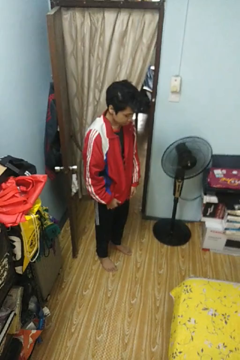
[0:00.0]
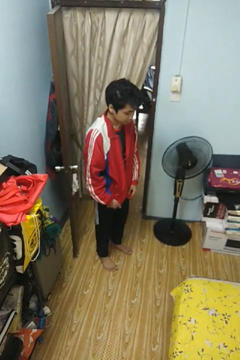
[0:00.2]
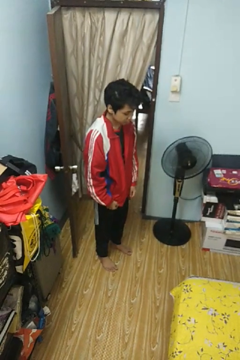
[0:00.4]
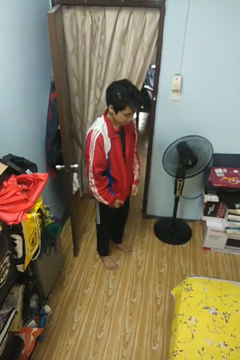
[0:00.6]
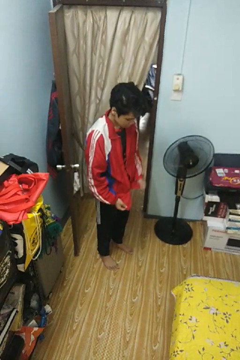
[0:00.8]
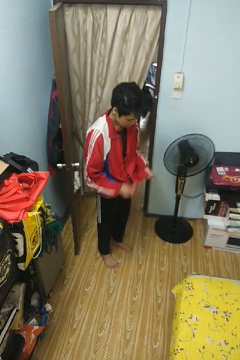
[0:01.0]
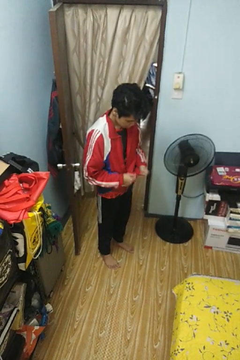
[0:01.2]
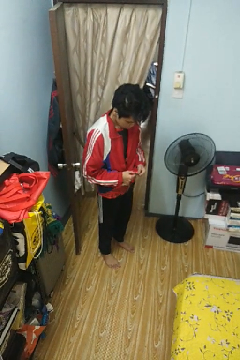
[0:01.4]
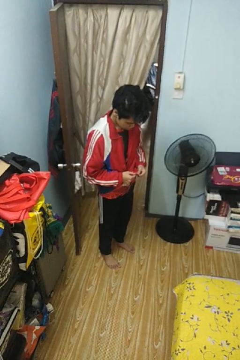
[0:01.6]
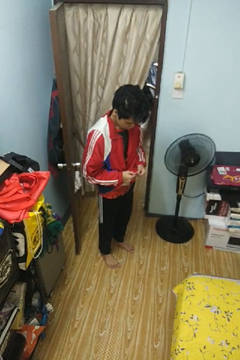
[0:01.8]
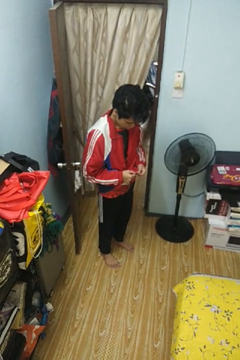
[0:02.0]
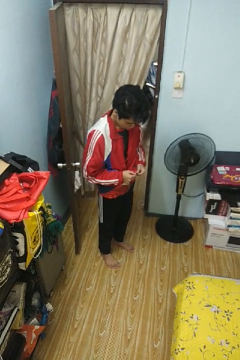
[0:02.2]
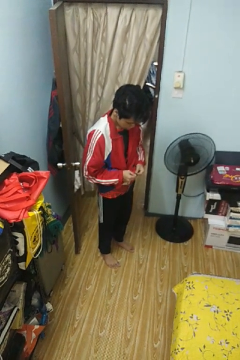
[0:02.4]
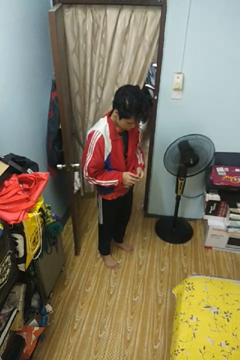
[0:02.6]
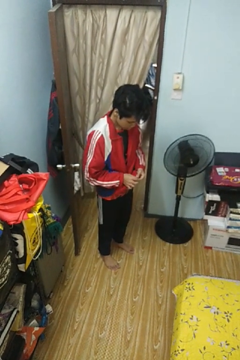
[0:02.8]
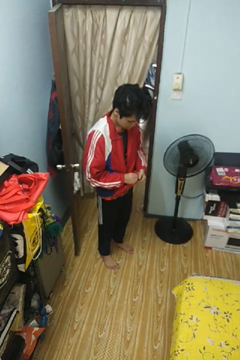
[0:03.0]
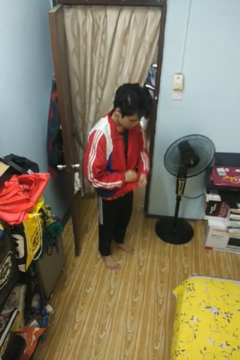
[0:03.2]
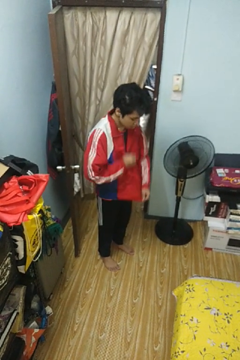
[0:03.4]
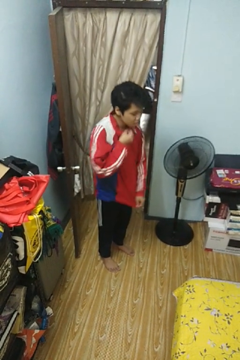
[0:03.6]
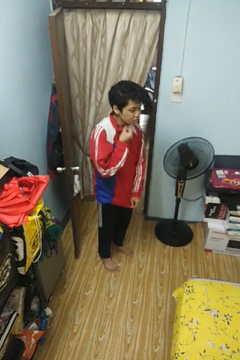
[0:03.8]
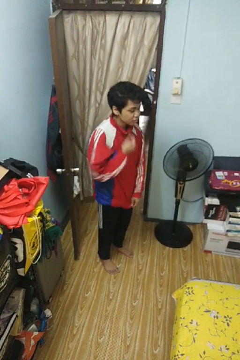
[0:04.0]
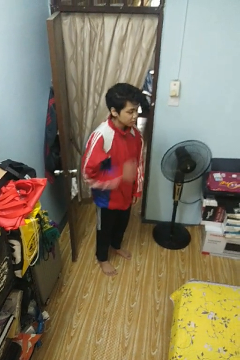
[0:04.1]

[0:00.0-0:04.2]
person zips up jacket

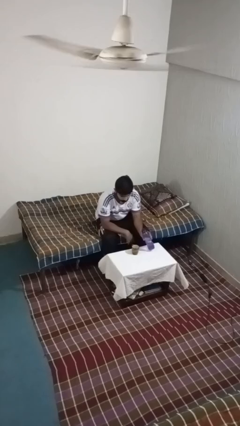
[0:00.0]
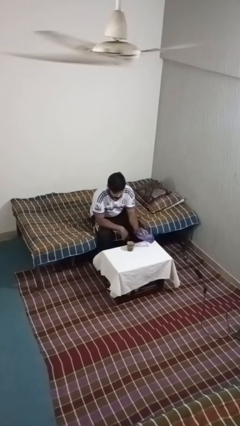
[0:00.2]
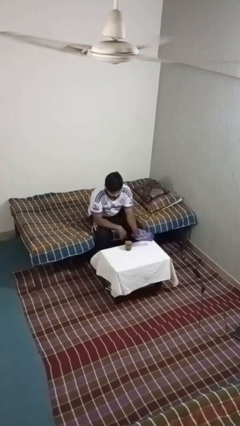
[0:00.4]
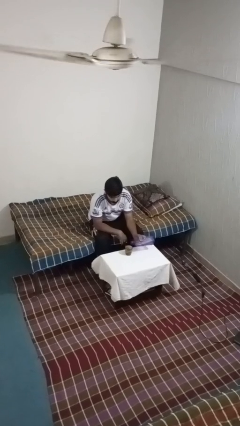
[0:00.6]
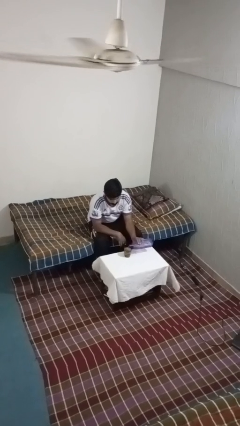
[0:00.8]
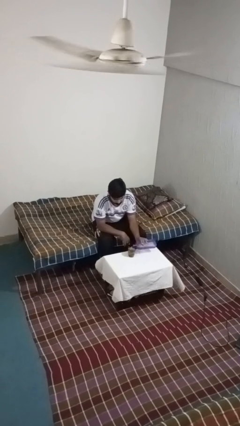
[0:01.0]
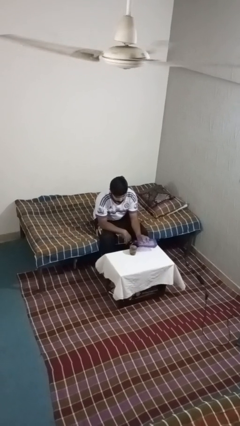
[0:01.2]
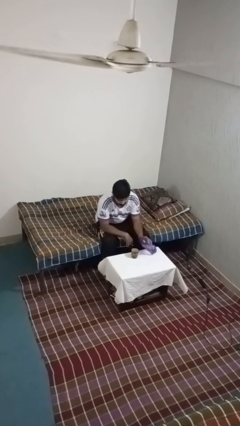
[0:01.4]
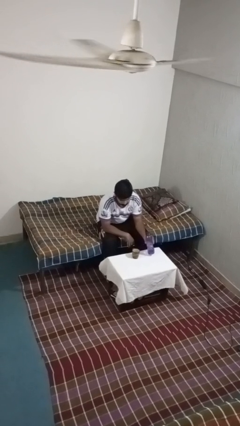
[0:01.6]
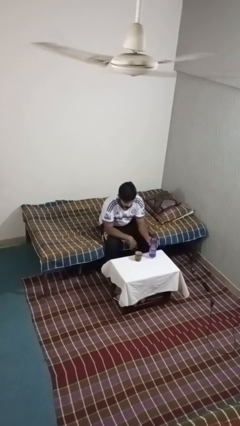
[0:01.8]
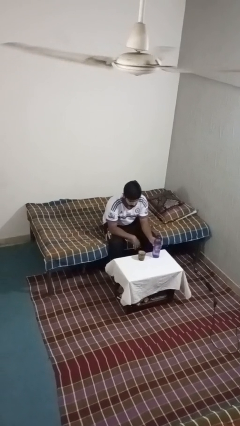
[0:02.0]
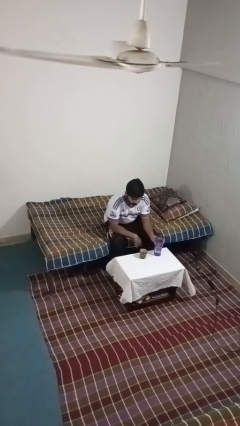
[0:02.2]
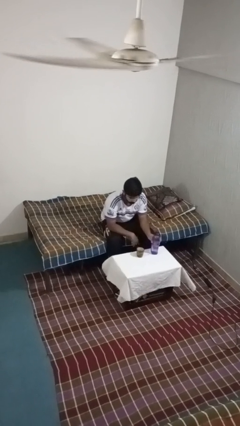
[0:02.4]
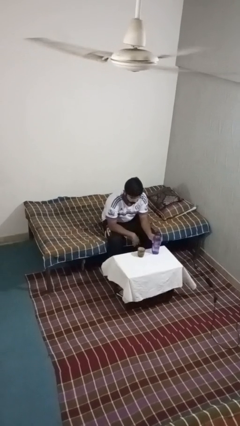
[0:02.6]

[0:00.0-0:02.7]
person pours liquid into cup

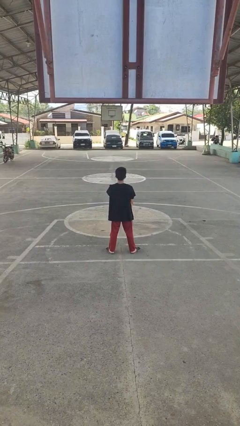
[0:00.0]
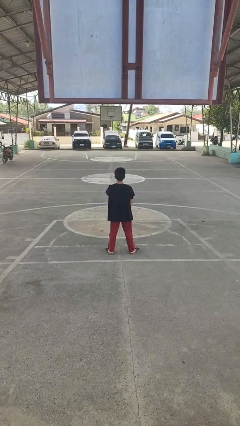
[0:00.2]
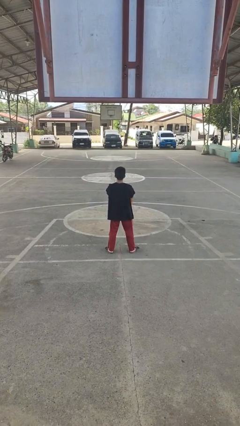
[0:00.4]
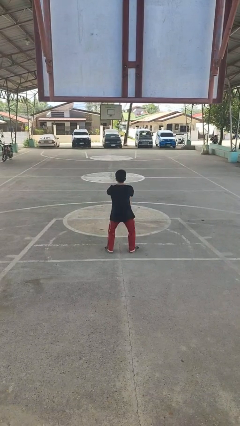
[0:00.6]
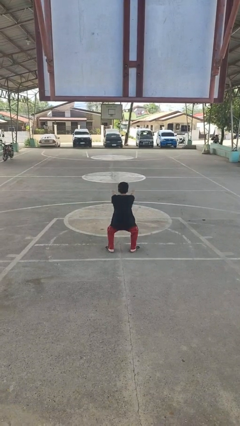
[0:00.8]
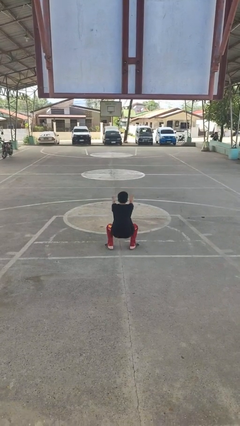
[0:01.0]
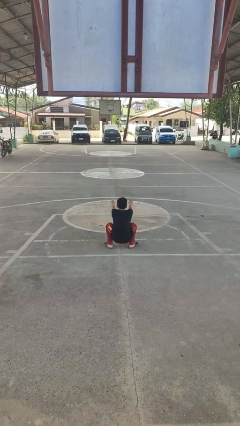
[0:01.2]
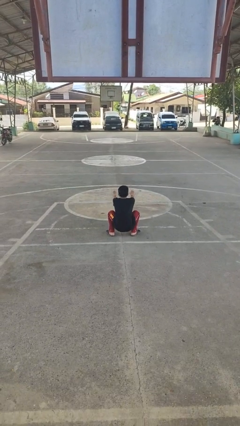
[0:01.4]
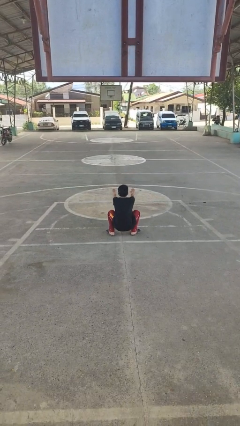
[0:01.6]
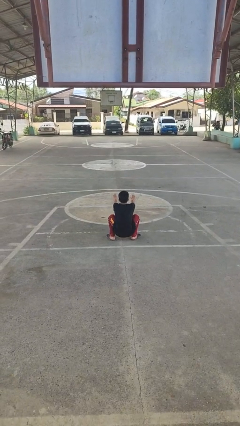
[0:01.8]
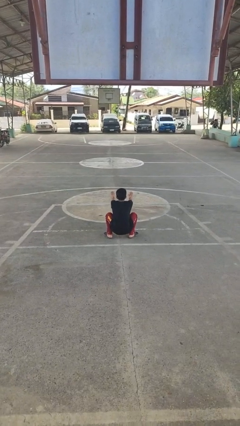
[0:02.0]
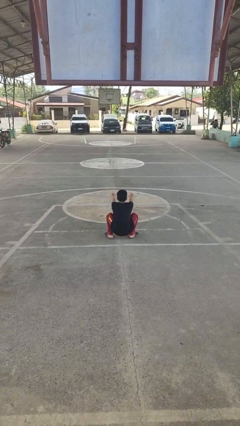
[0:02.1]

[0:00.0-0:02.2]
person squats

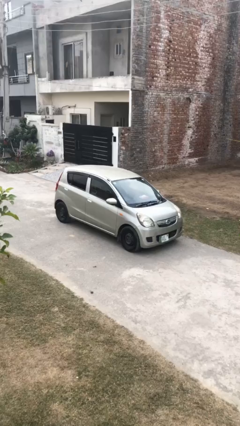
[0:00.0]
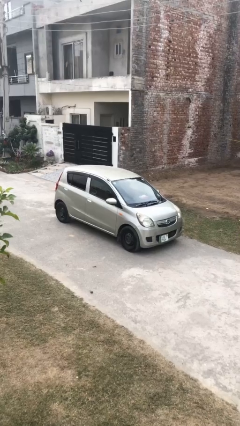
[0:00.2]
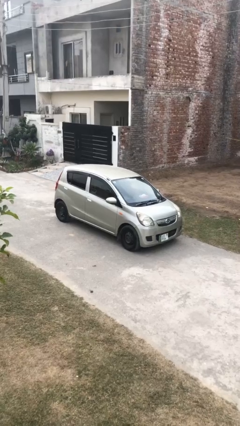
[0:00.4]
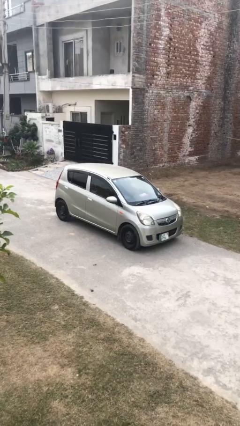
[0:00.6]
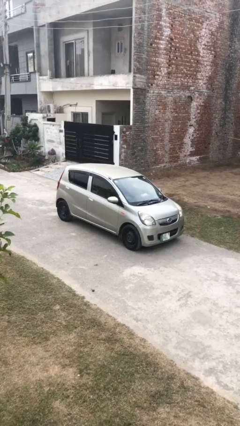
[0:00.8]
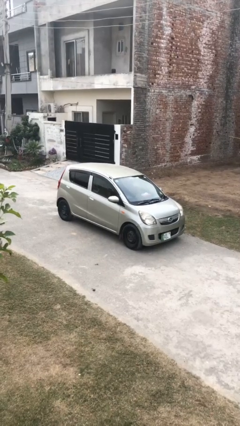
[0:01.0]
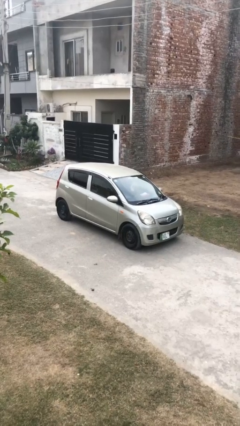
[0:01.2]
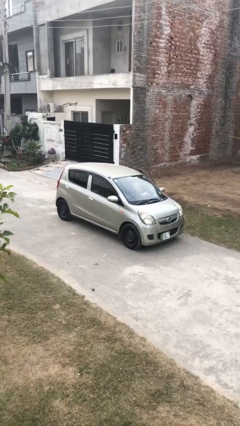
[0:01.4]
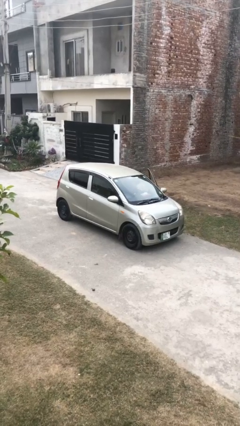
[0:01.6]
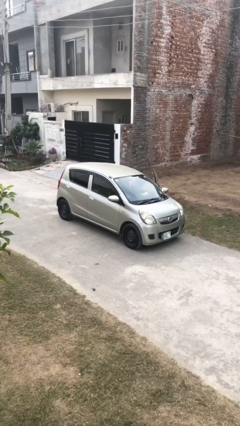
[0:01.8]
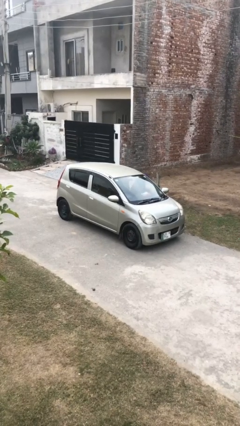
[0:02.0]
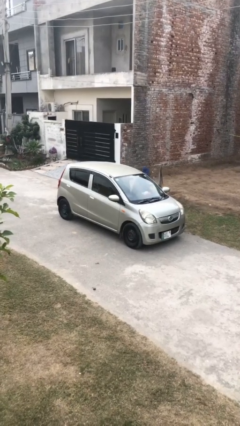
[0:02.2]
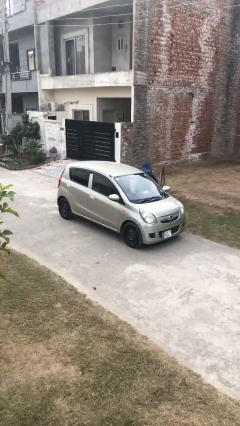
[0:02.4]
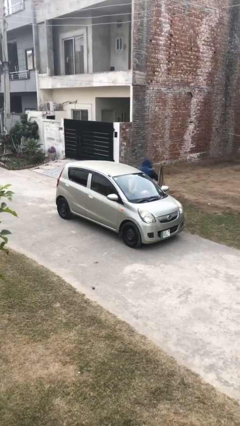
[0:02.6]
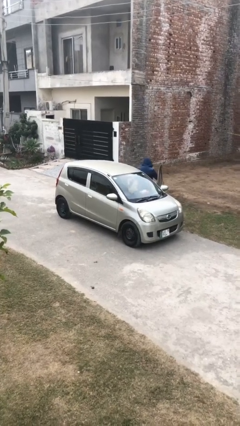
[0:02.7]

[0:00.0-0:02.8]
car drops off person

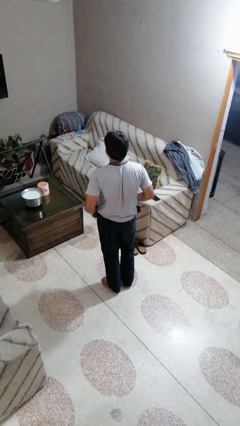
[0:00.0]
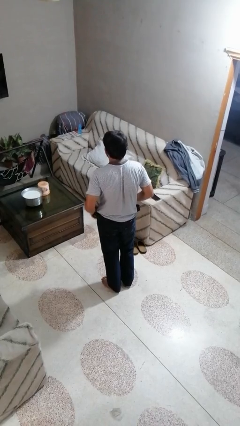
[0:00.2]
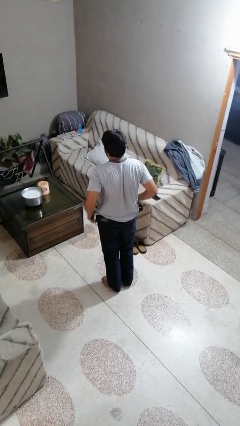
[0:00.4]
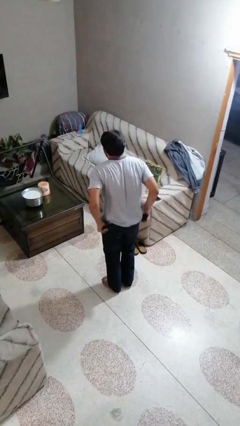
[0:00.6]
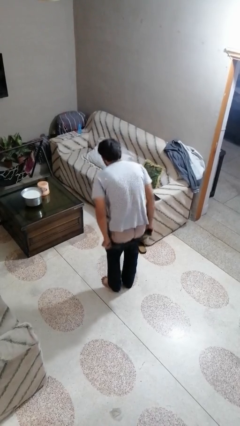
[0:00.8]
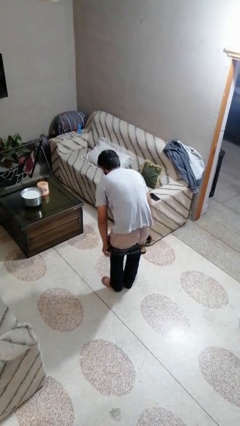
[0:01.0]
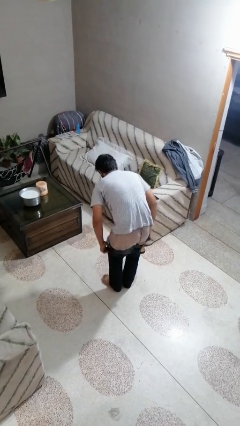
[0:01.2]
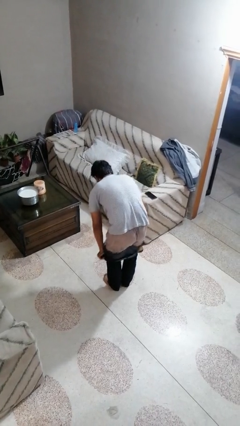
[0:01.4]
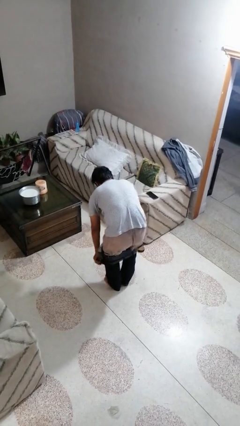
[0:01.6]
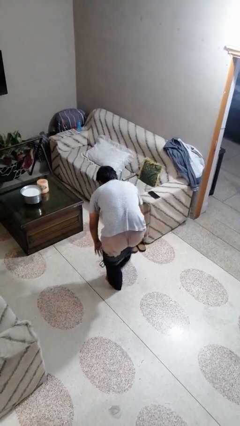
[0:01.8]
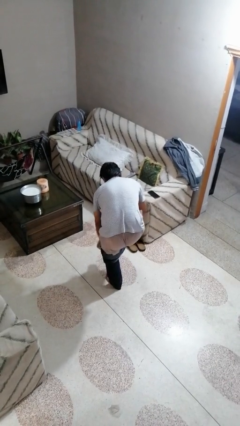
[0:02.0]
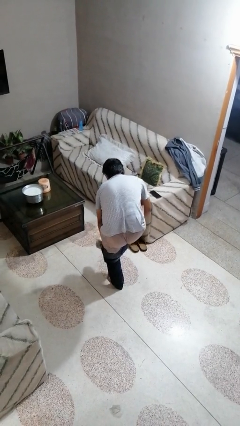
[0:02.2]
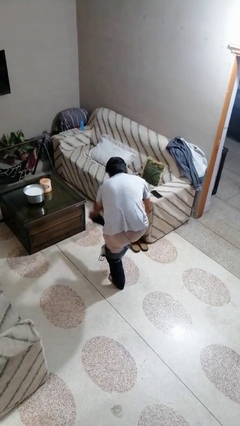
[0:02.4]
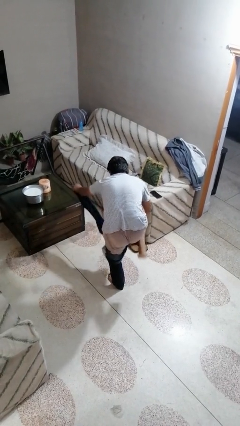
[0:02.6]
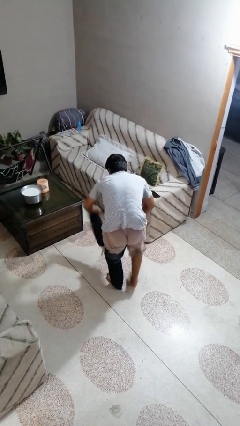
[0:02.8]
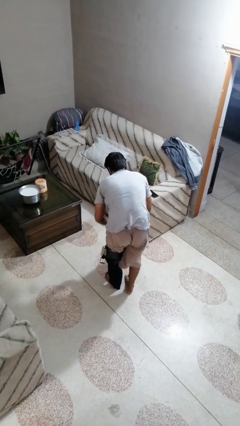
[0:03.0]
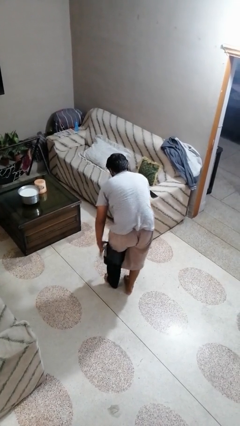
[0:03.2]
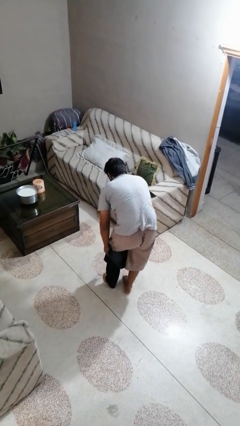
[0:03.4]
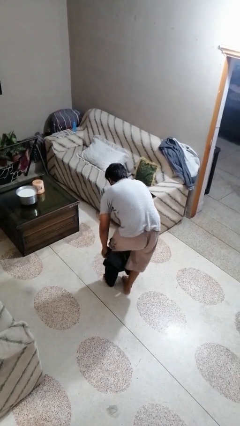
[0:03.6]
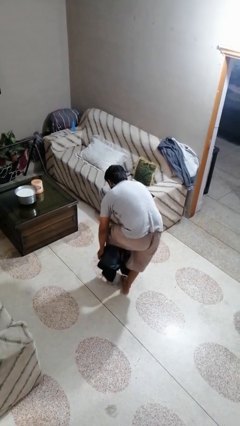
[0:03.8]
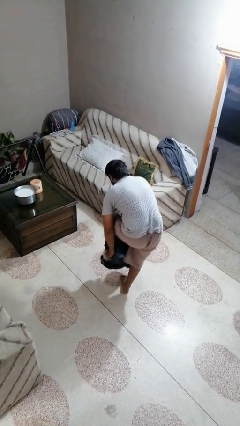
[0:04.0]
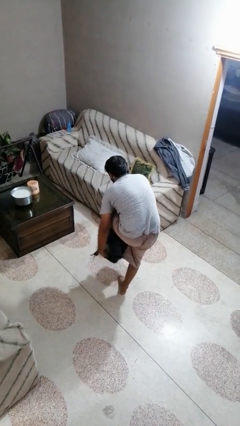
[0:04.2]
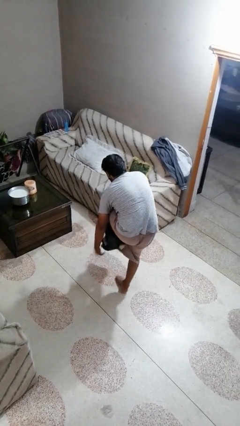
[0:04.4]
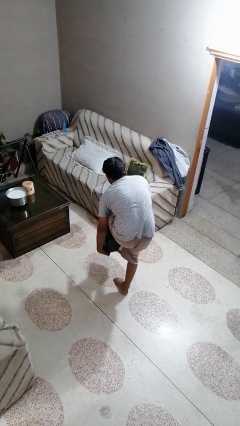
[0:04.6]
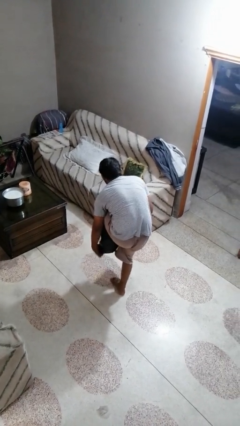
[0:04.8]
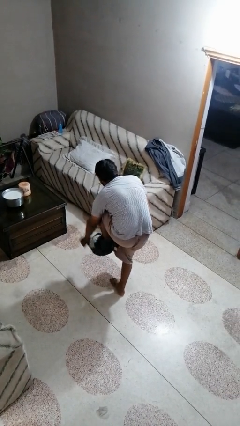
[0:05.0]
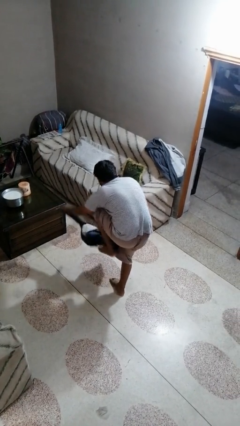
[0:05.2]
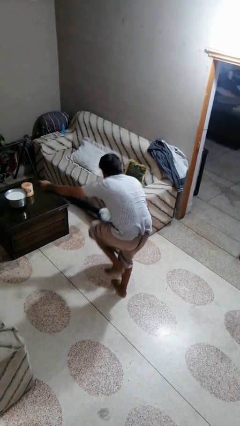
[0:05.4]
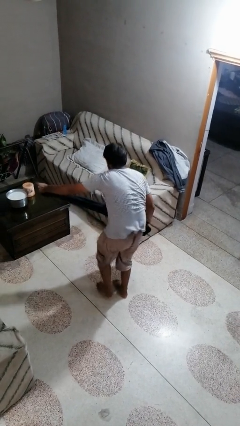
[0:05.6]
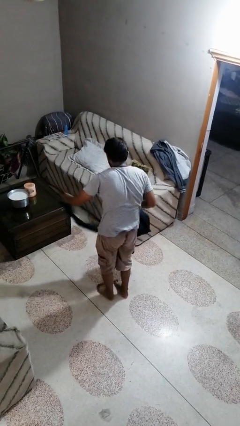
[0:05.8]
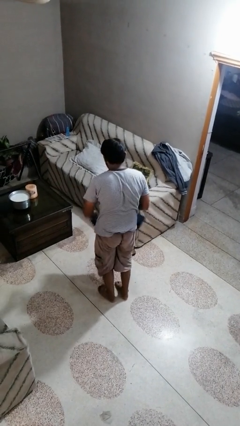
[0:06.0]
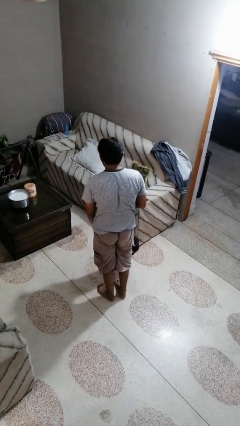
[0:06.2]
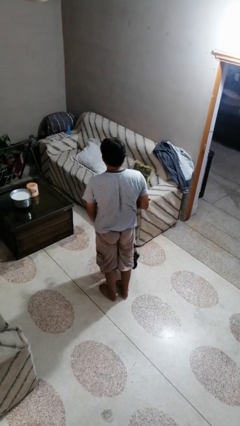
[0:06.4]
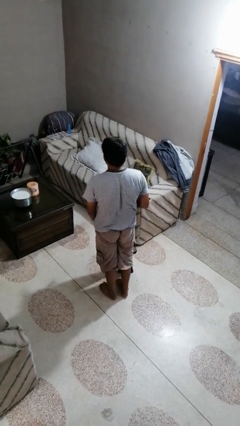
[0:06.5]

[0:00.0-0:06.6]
person takes off pants

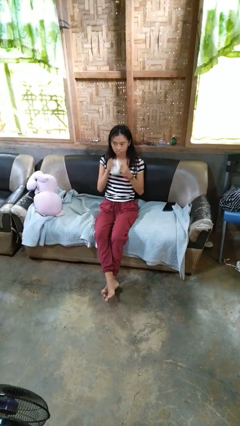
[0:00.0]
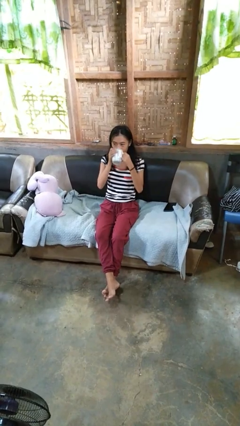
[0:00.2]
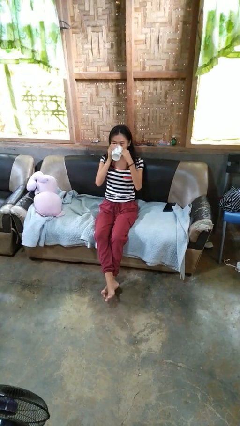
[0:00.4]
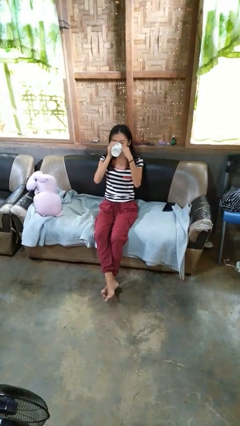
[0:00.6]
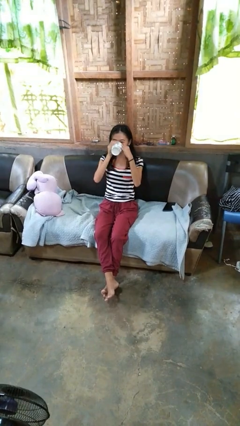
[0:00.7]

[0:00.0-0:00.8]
person drinks from mug
